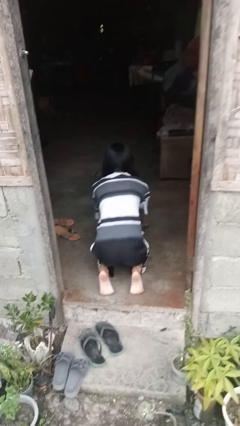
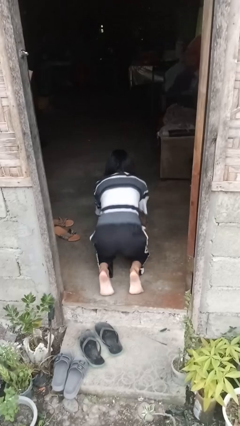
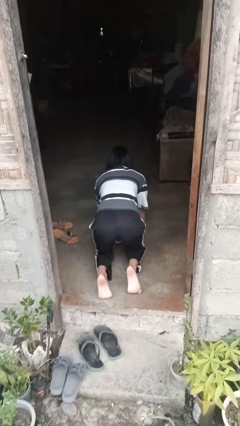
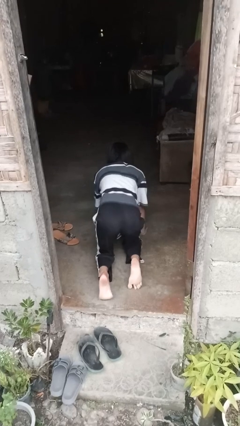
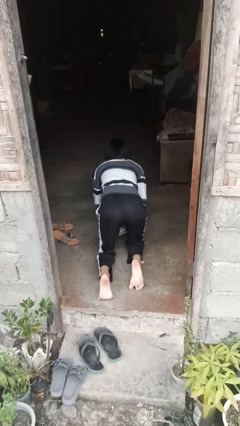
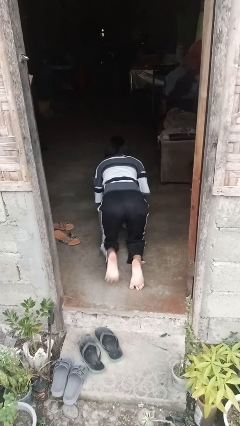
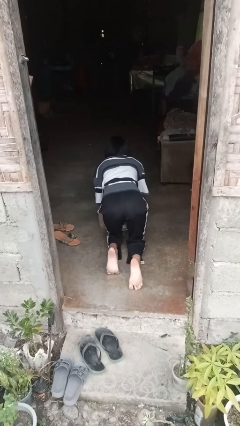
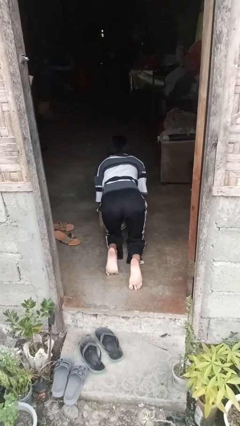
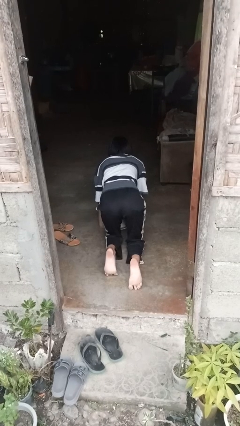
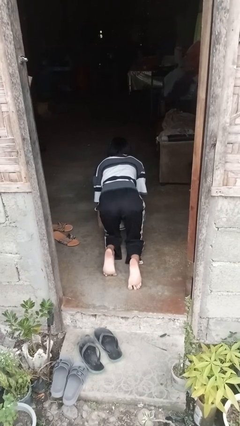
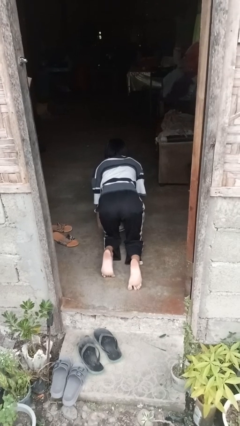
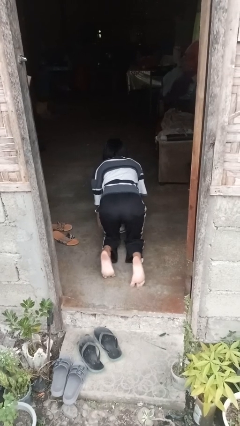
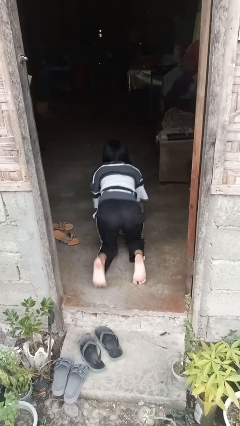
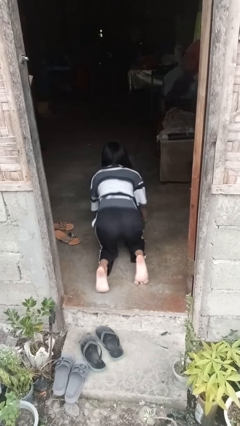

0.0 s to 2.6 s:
person crawls

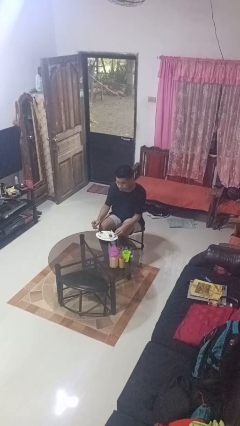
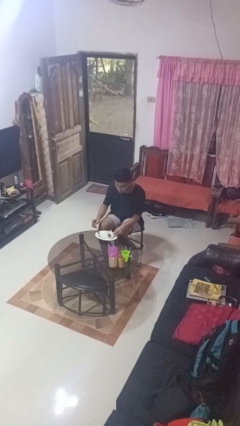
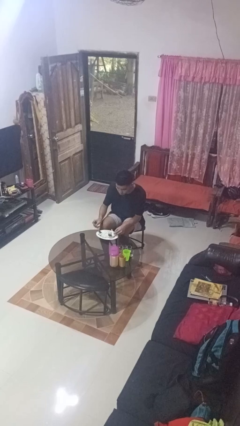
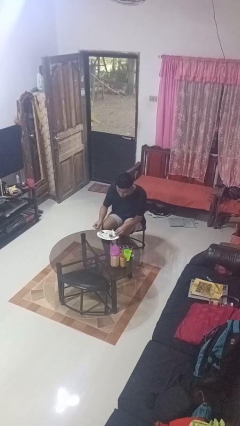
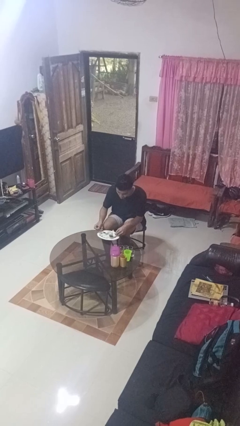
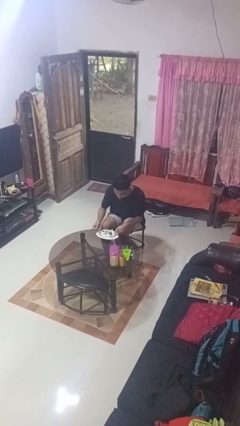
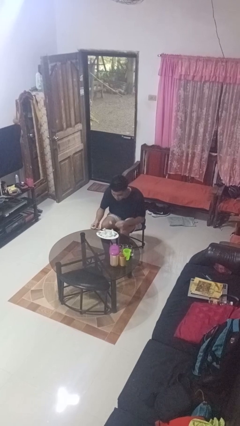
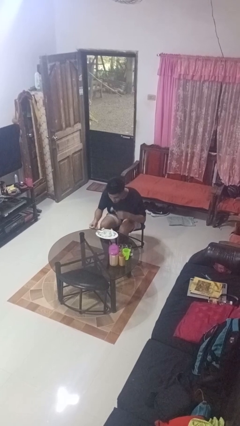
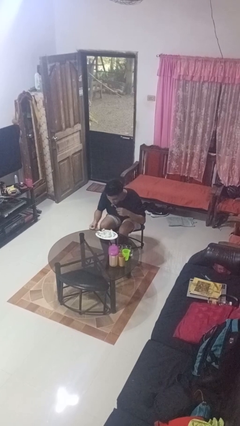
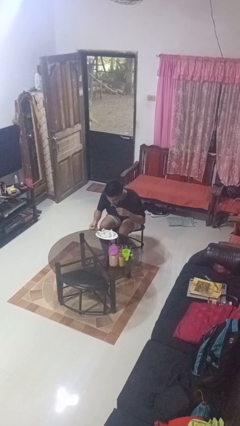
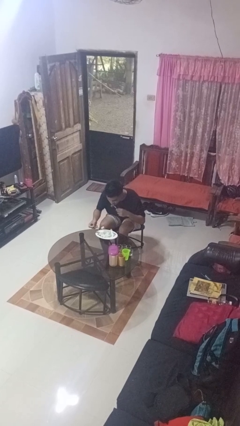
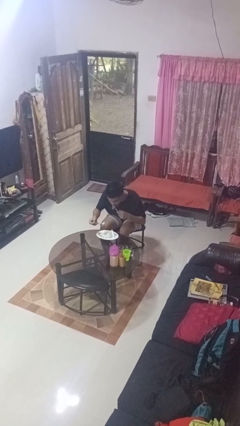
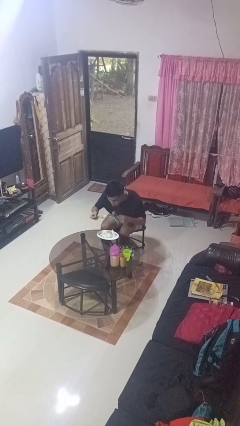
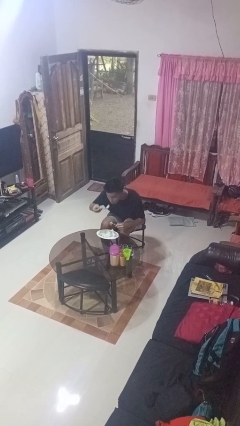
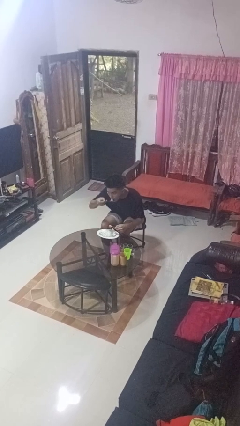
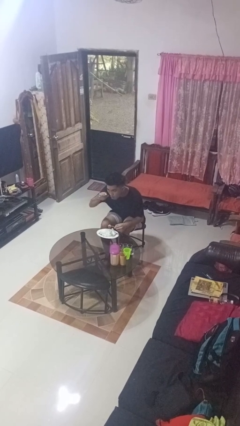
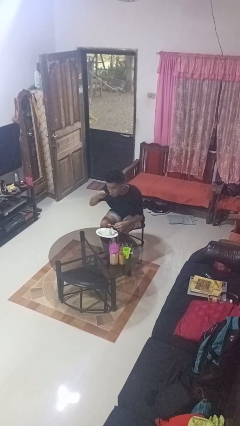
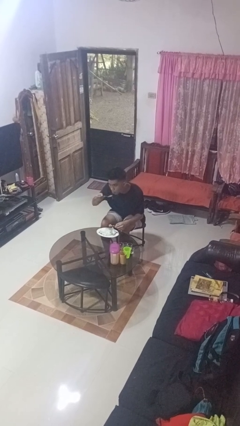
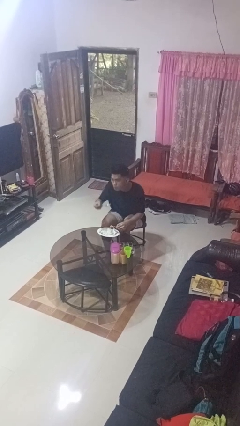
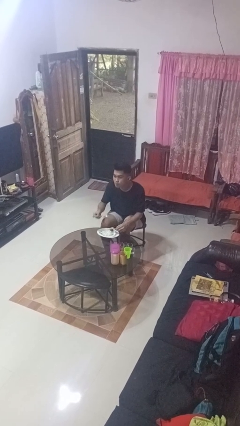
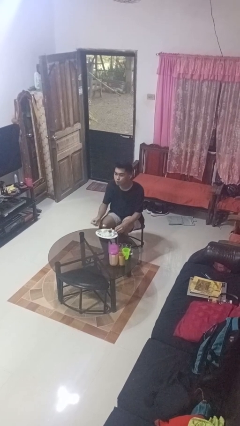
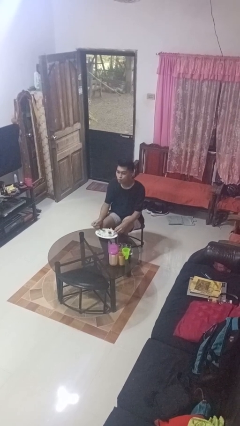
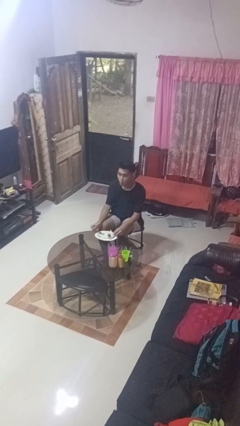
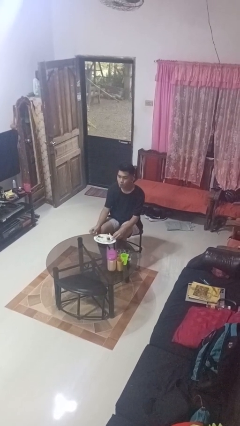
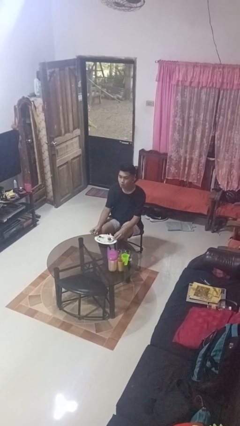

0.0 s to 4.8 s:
person eats with utensil

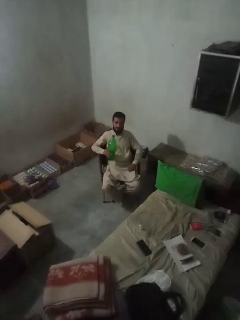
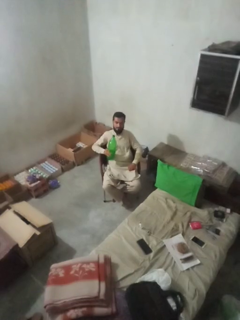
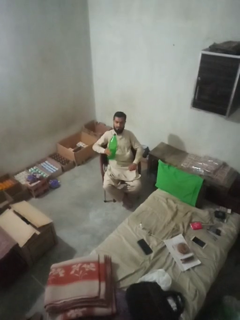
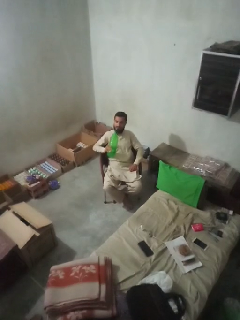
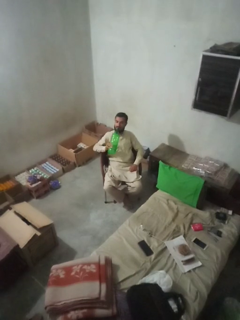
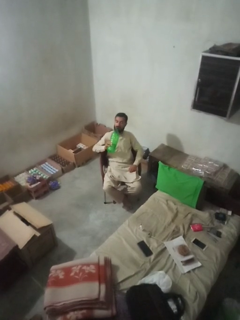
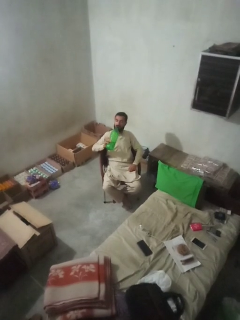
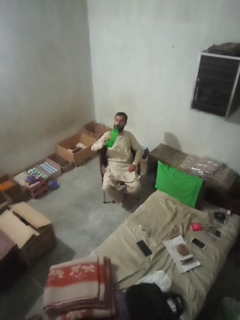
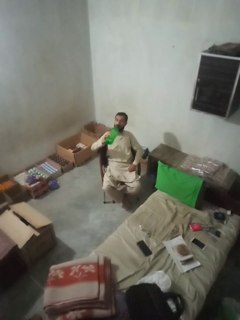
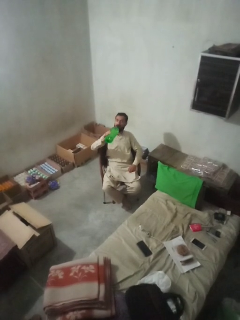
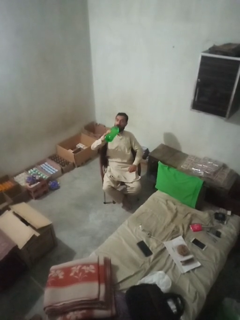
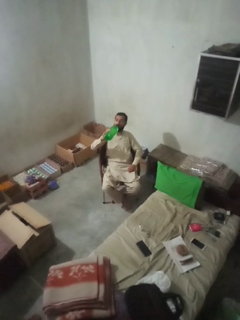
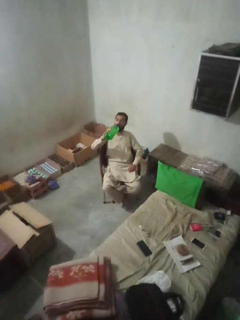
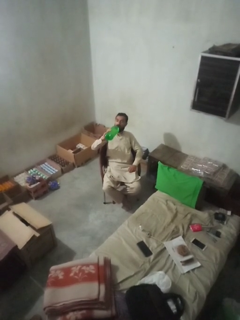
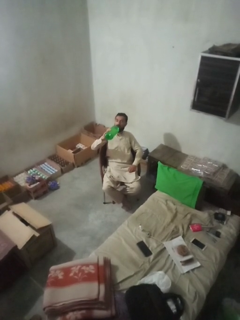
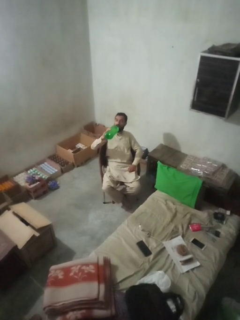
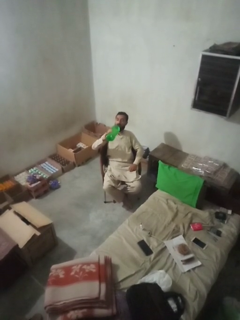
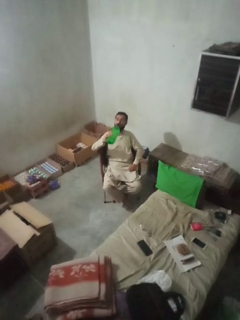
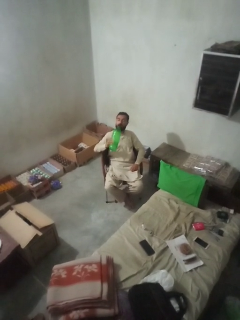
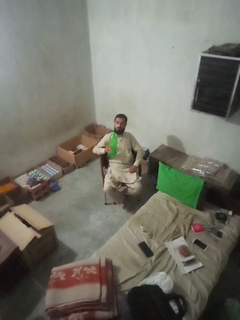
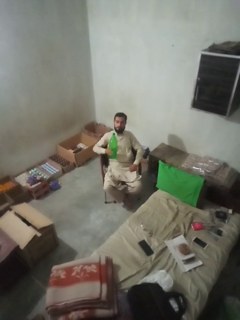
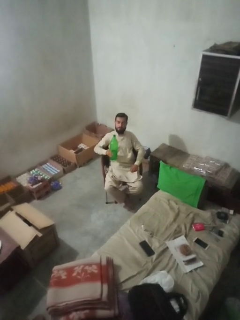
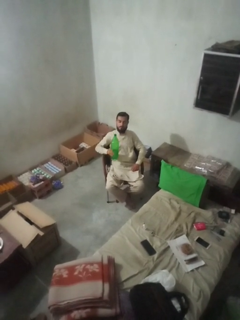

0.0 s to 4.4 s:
person drinks from bottle

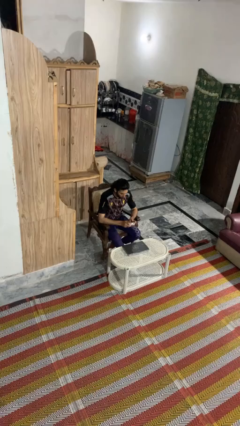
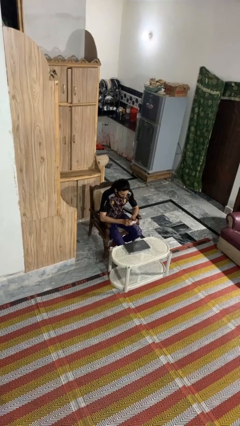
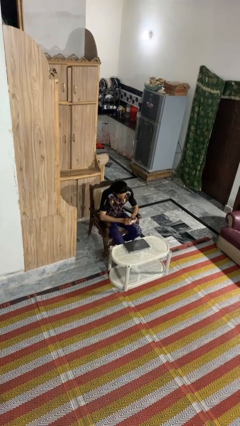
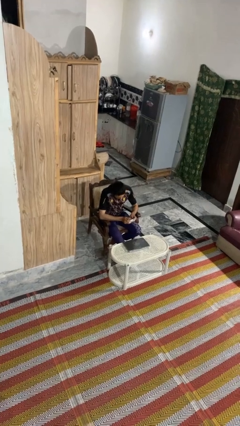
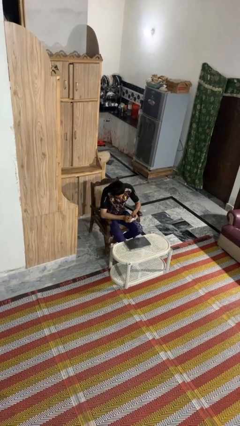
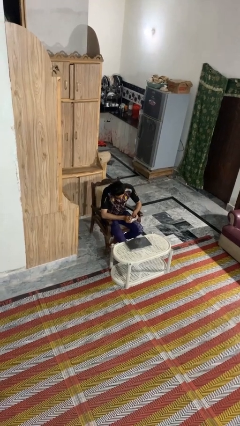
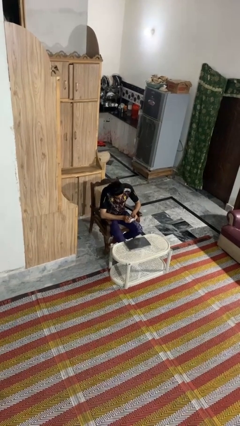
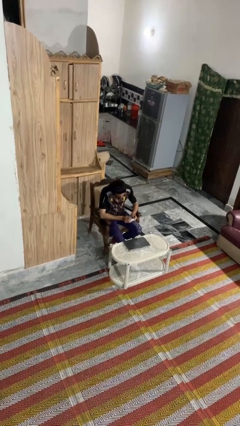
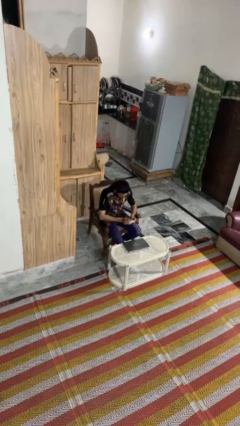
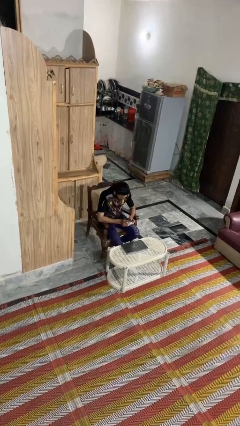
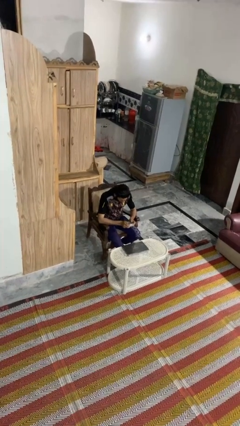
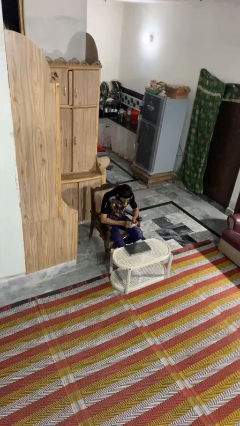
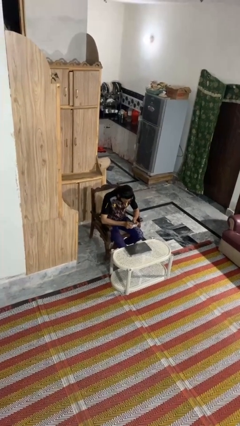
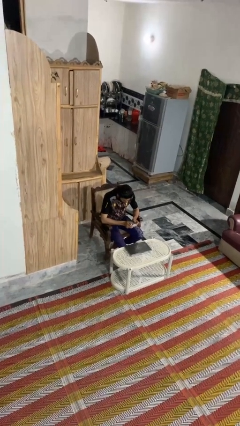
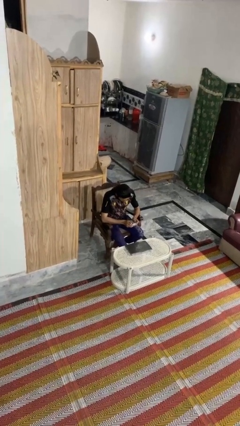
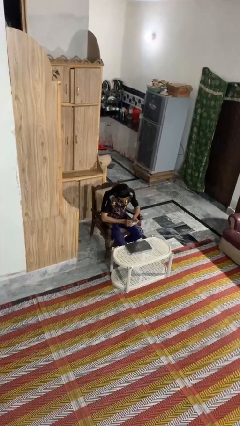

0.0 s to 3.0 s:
person interacts with handheld game

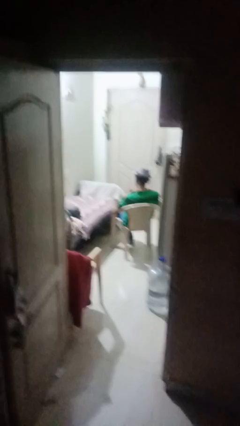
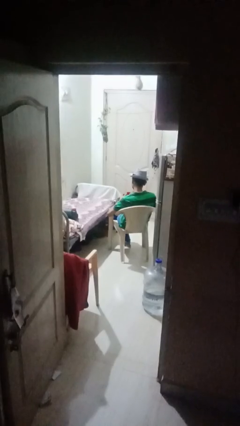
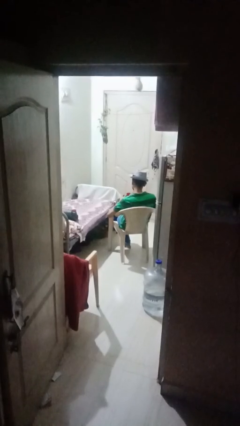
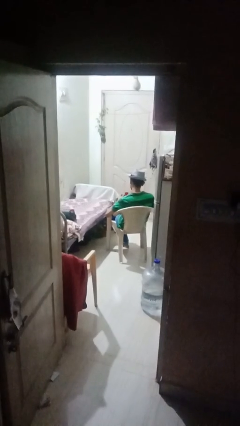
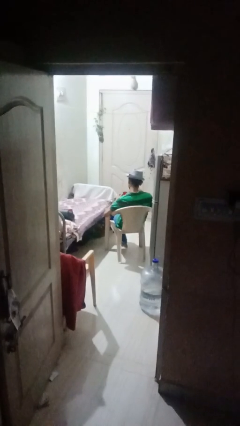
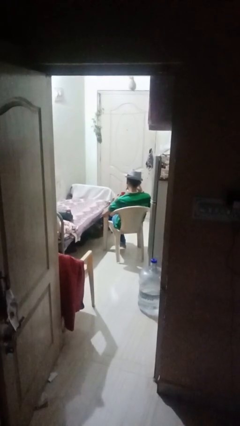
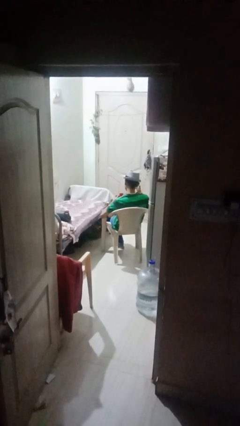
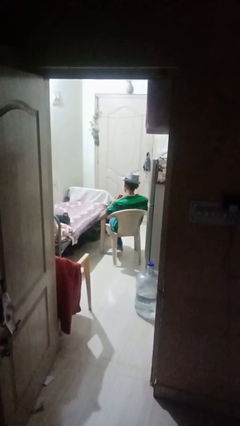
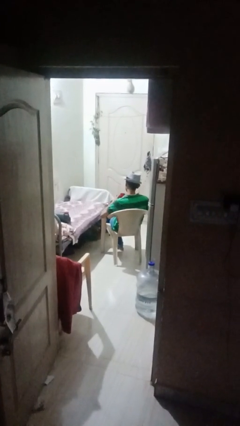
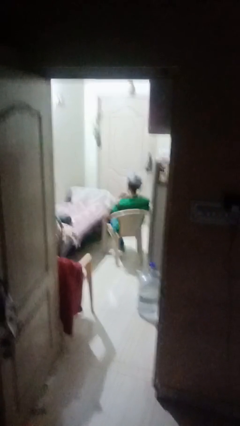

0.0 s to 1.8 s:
person stirs mug

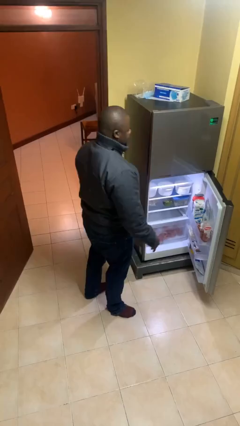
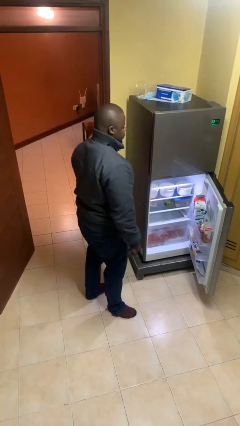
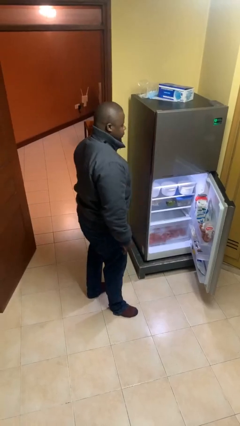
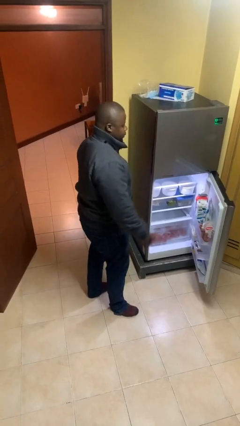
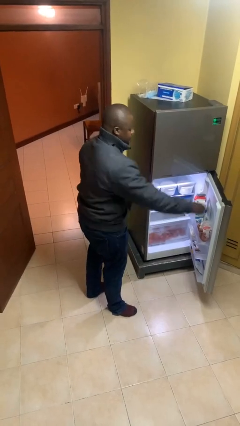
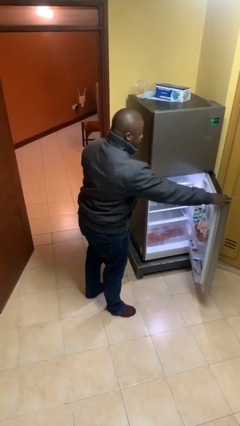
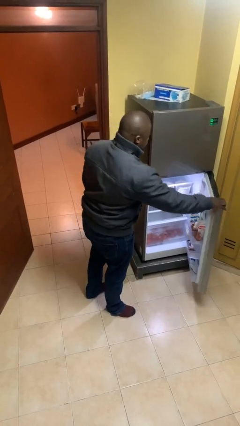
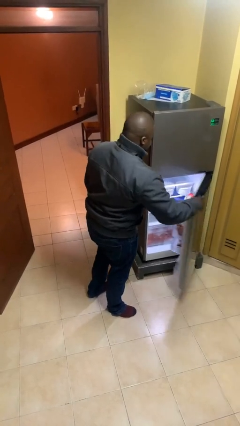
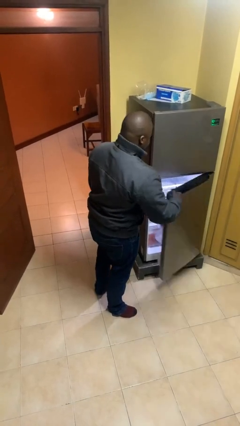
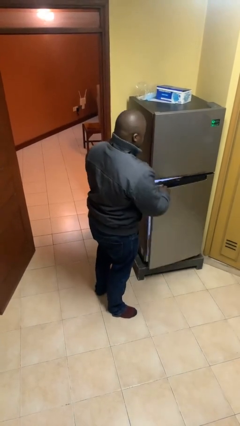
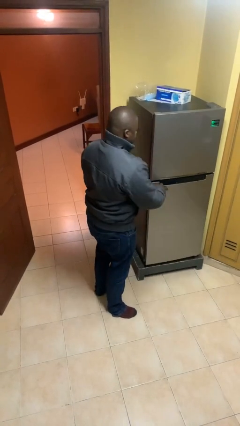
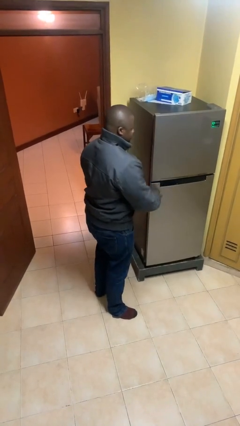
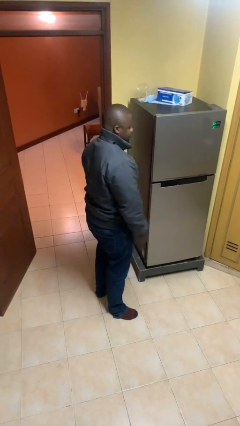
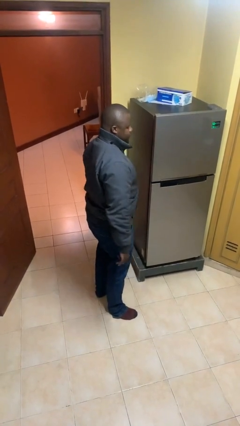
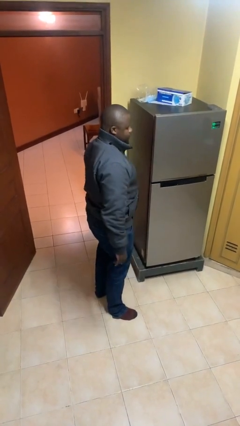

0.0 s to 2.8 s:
person closes refrigerator
